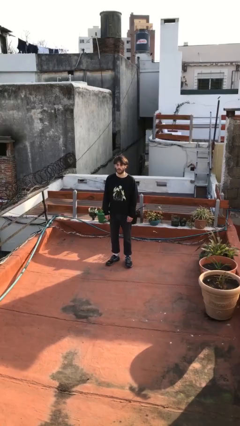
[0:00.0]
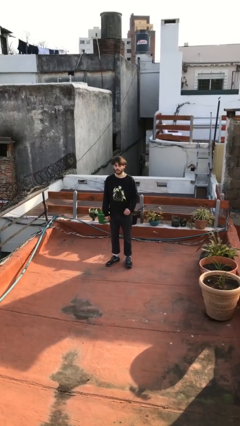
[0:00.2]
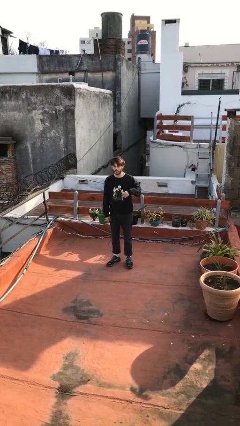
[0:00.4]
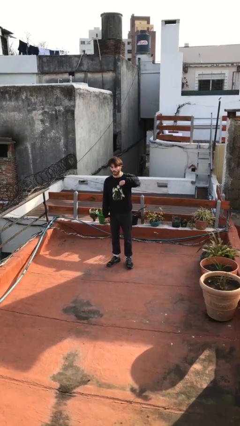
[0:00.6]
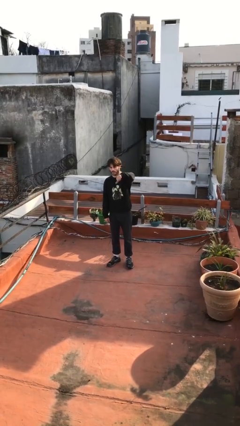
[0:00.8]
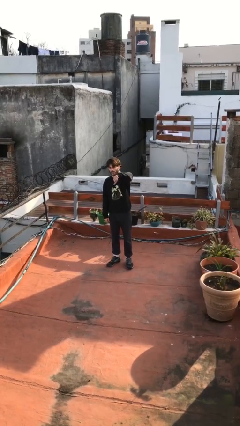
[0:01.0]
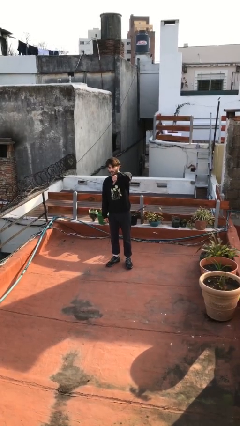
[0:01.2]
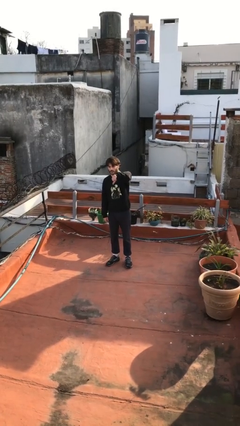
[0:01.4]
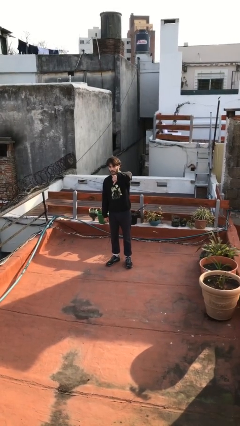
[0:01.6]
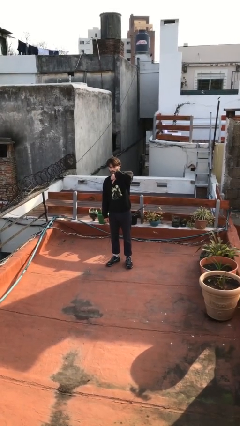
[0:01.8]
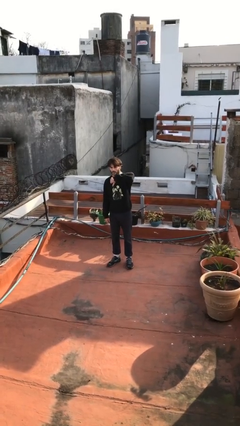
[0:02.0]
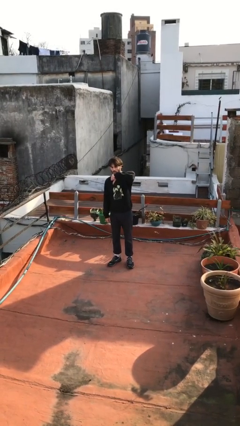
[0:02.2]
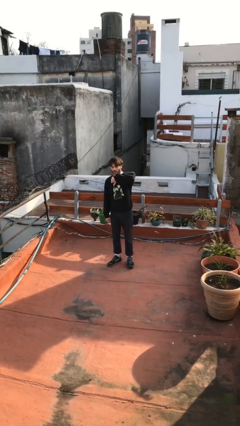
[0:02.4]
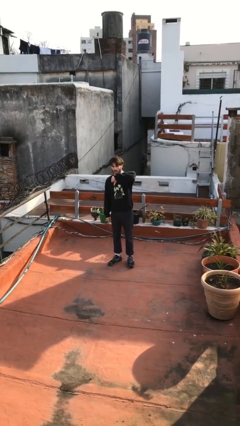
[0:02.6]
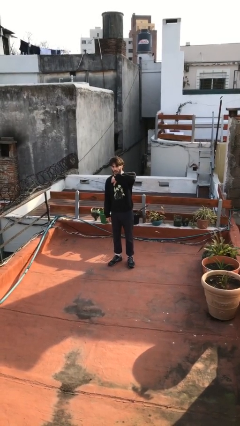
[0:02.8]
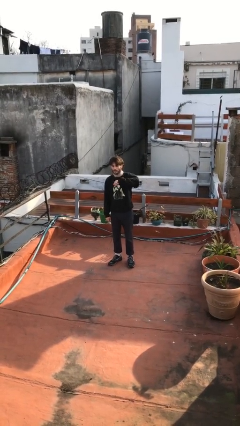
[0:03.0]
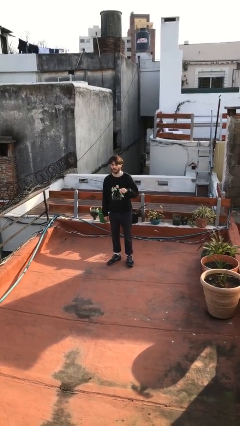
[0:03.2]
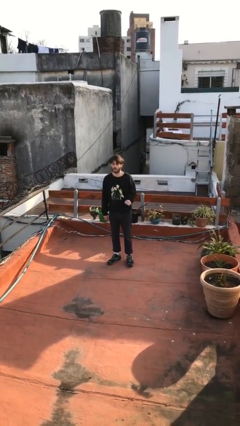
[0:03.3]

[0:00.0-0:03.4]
person gestures thumbs down

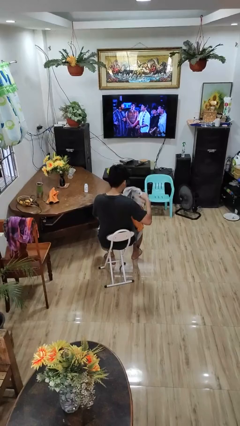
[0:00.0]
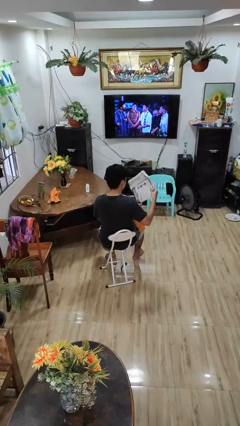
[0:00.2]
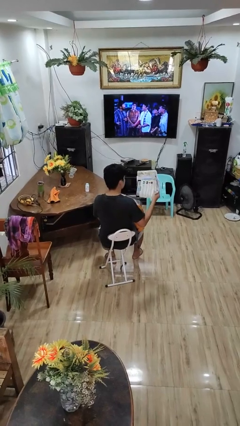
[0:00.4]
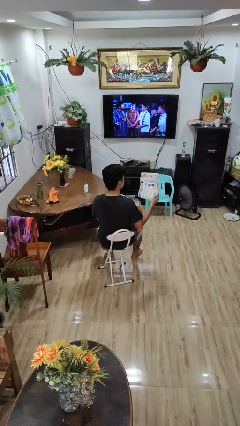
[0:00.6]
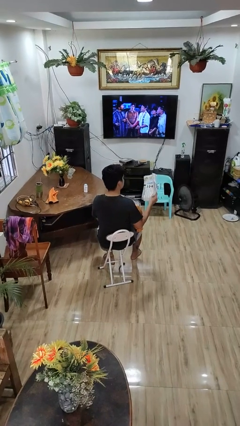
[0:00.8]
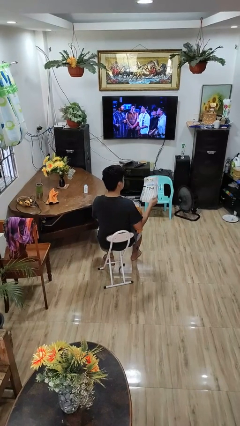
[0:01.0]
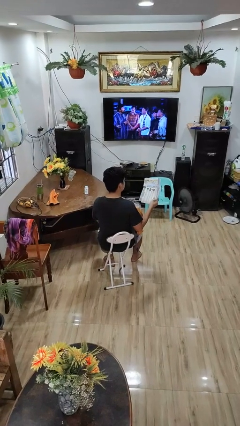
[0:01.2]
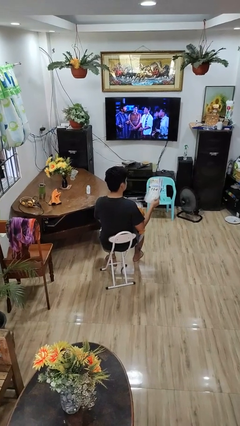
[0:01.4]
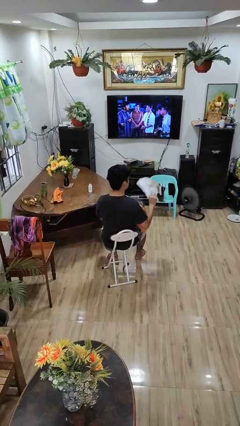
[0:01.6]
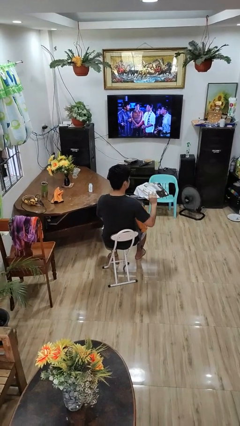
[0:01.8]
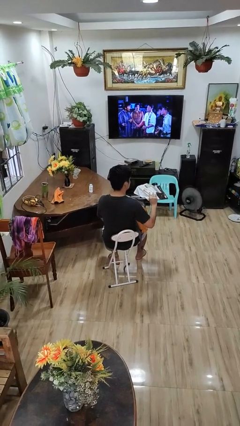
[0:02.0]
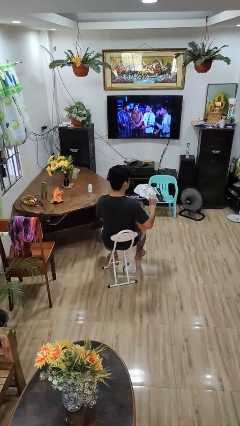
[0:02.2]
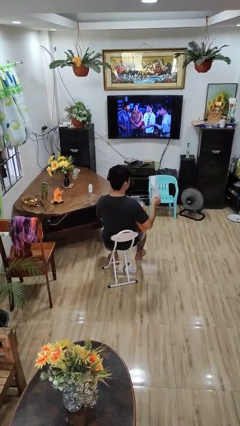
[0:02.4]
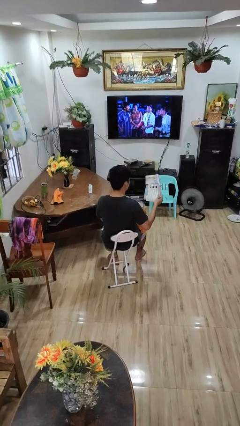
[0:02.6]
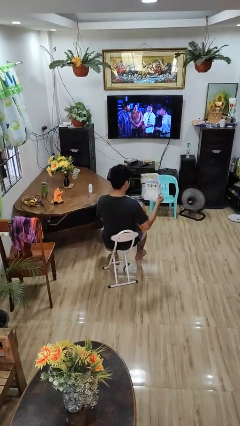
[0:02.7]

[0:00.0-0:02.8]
person takes object from backpack

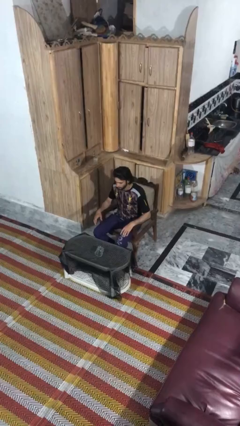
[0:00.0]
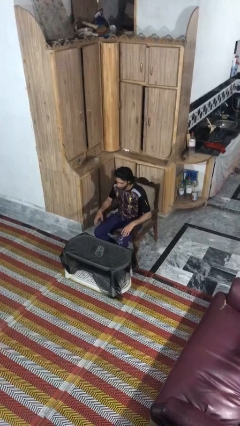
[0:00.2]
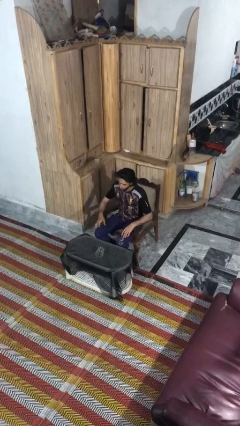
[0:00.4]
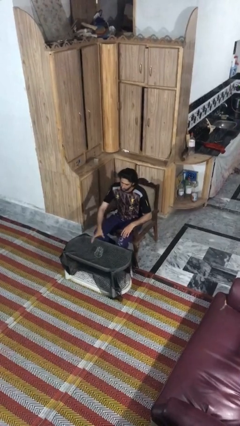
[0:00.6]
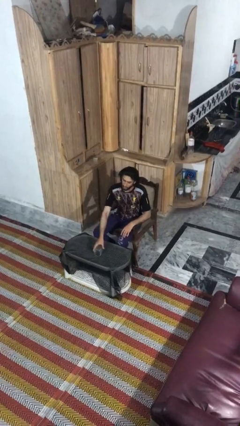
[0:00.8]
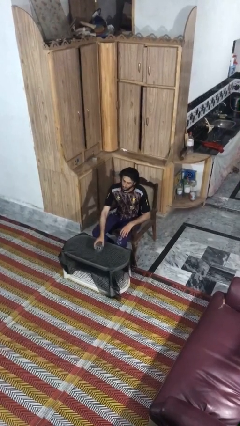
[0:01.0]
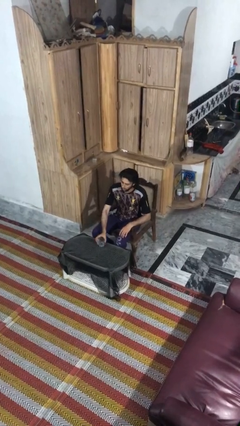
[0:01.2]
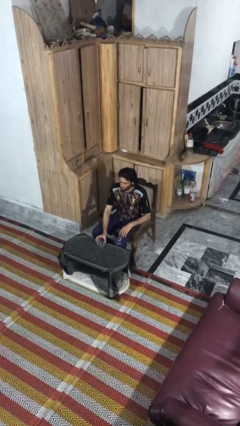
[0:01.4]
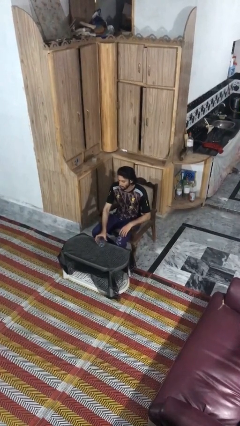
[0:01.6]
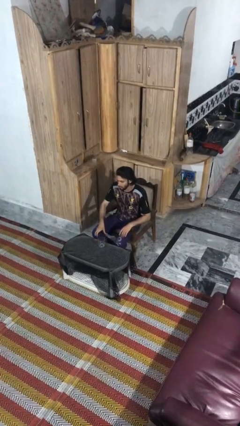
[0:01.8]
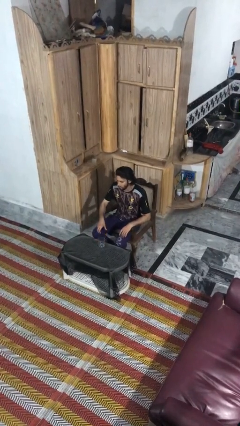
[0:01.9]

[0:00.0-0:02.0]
person sets upright glass

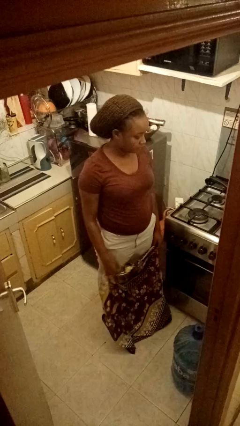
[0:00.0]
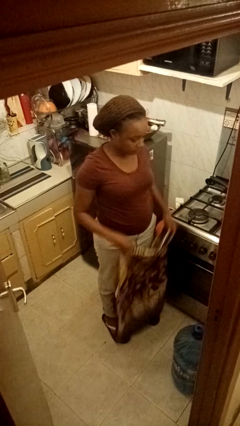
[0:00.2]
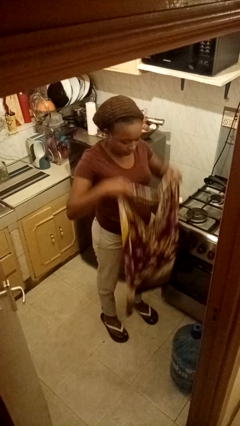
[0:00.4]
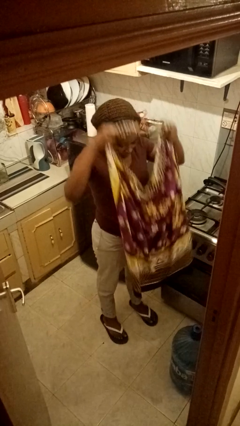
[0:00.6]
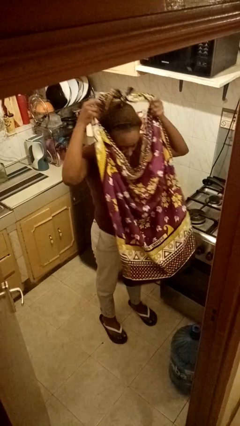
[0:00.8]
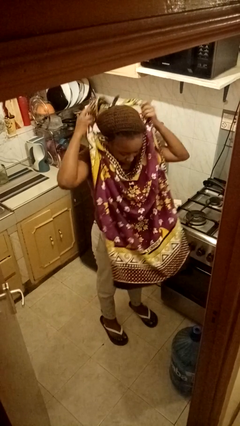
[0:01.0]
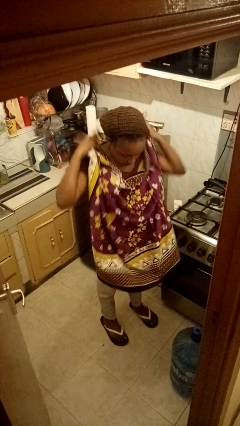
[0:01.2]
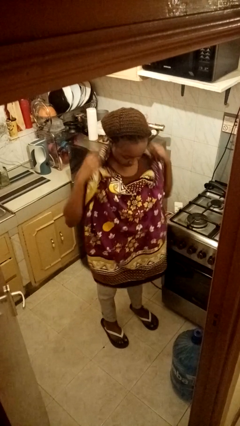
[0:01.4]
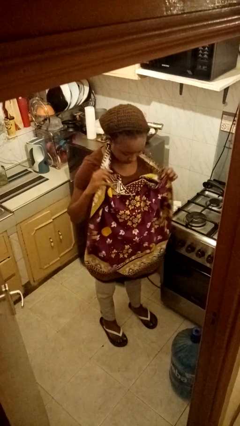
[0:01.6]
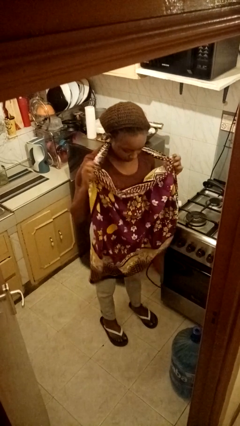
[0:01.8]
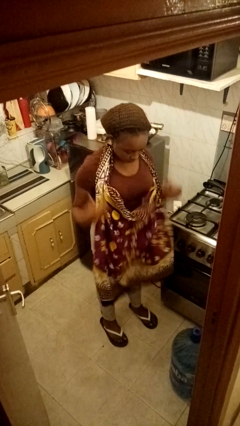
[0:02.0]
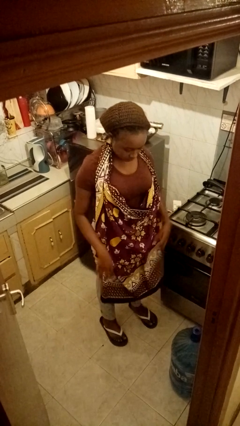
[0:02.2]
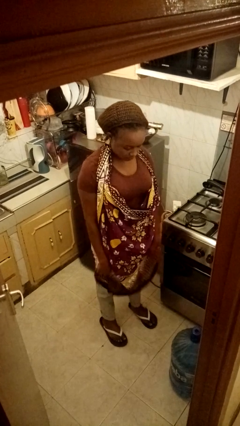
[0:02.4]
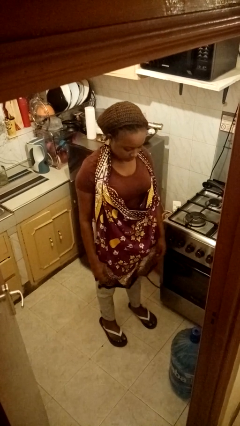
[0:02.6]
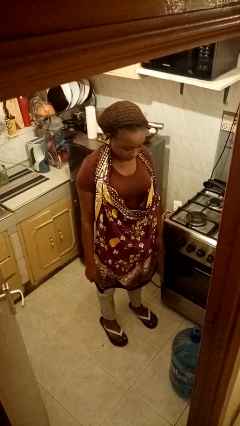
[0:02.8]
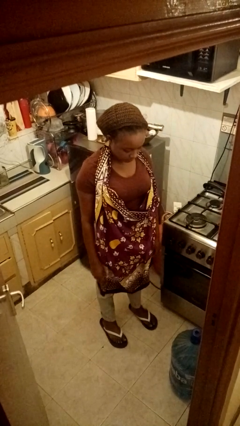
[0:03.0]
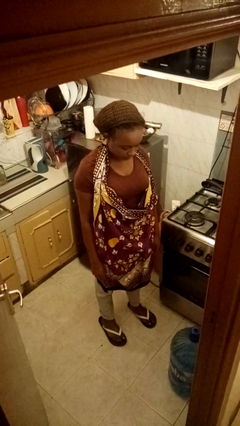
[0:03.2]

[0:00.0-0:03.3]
person puts on apron

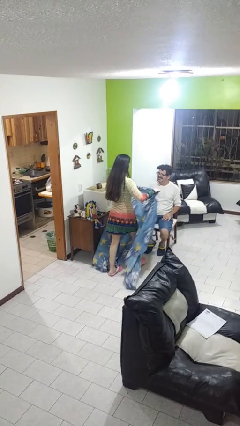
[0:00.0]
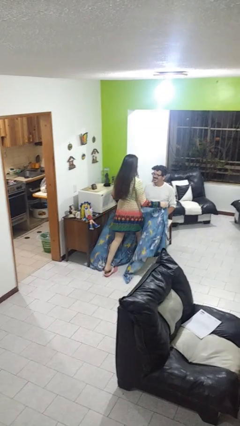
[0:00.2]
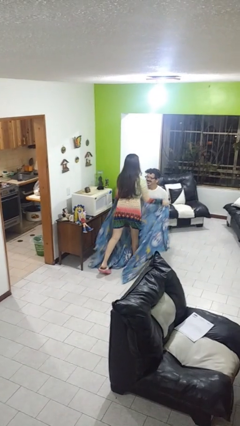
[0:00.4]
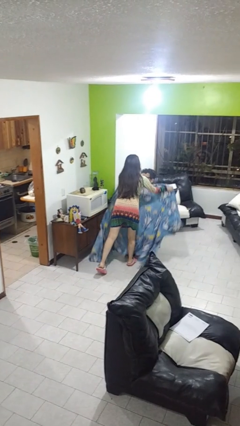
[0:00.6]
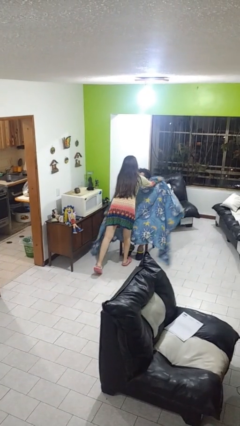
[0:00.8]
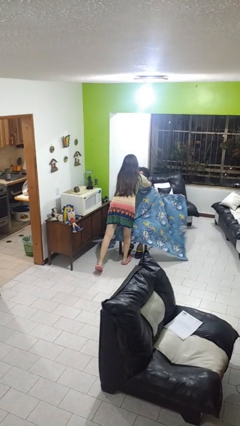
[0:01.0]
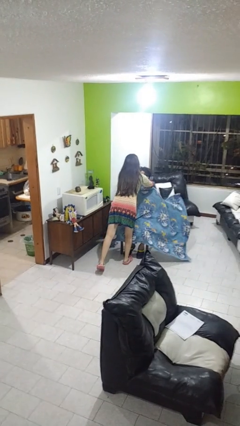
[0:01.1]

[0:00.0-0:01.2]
person covers friend with blanket

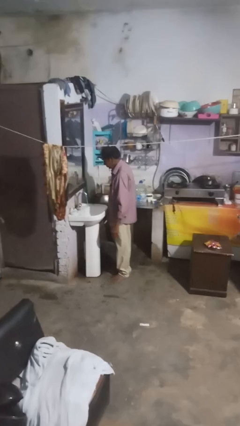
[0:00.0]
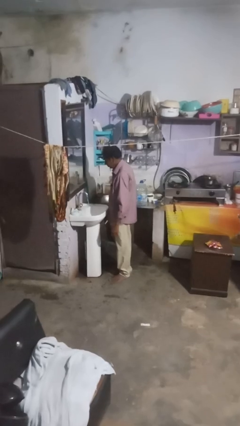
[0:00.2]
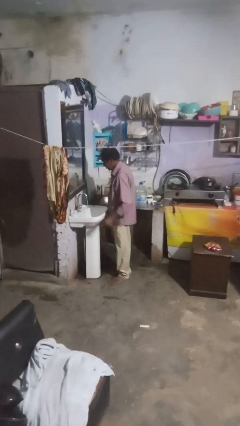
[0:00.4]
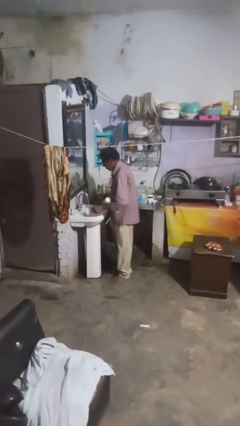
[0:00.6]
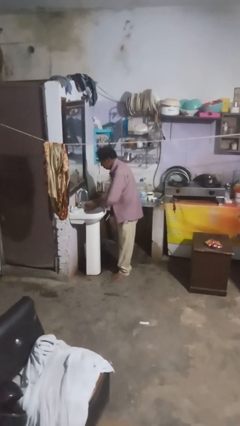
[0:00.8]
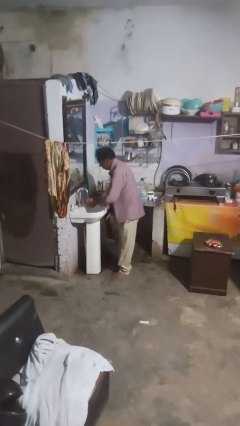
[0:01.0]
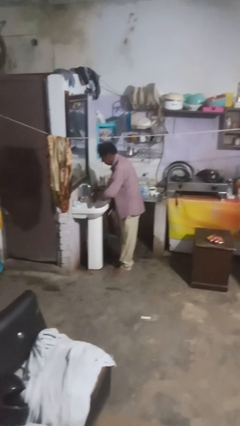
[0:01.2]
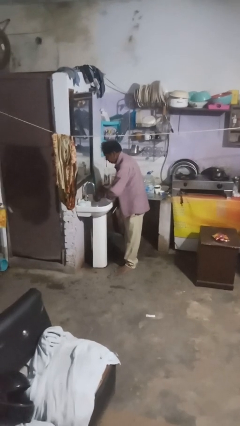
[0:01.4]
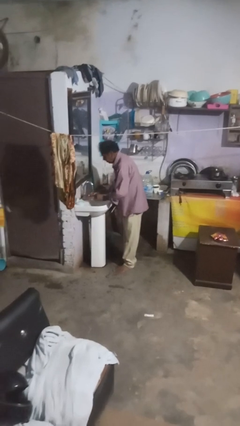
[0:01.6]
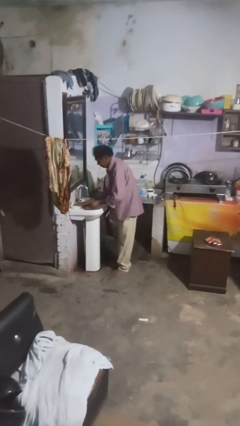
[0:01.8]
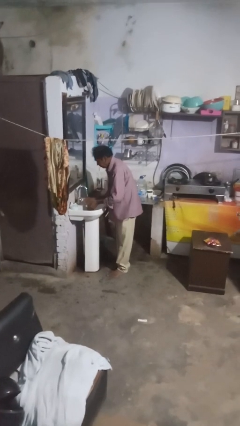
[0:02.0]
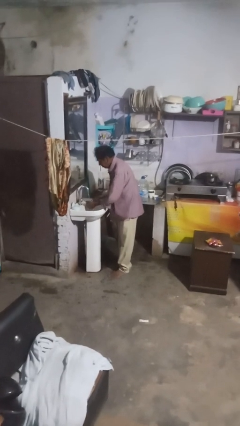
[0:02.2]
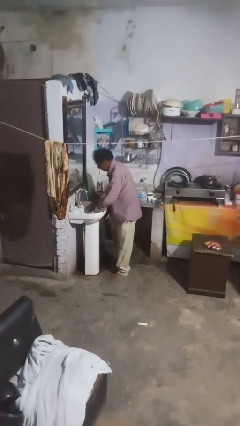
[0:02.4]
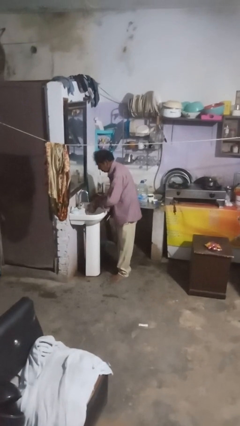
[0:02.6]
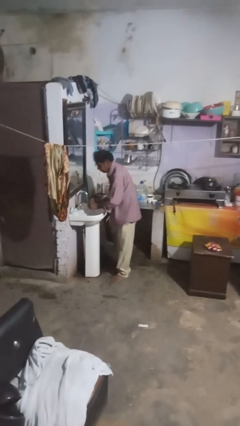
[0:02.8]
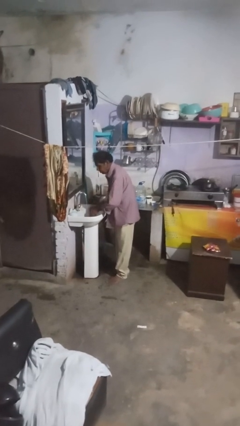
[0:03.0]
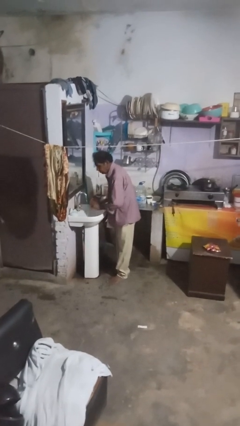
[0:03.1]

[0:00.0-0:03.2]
person washes hands

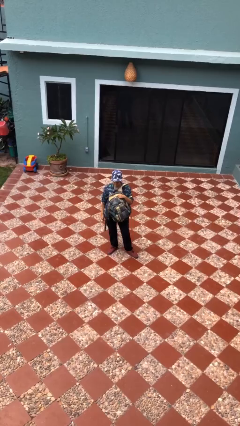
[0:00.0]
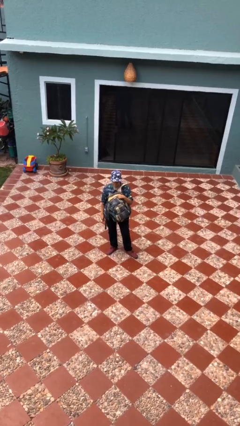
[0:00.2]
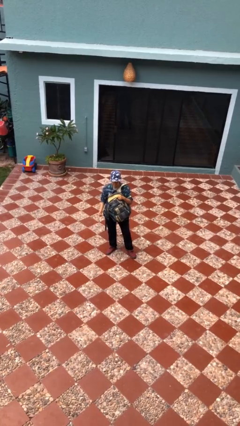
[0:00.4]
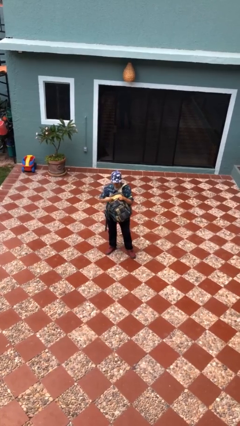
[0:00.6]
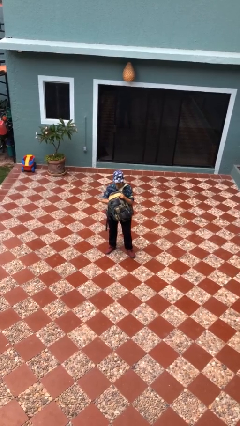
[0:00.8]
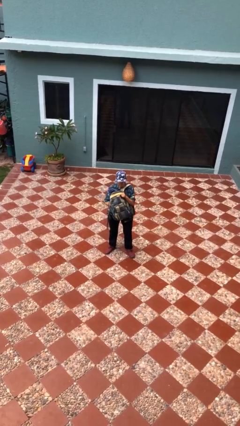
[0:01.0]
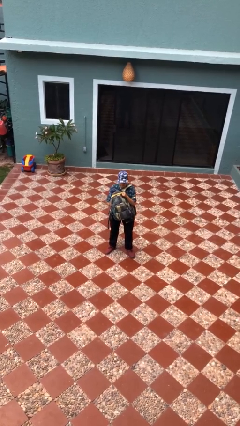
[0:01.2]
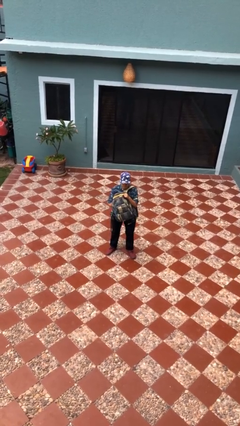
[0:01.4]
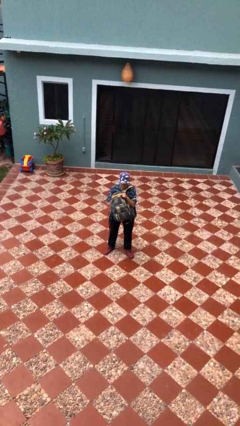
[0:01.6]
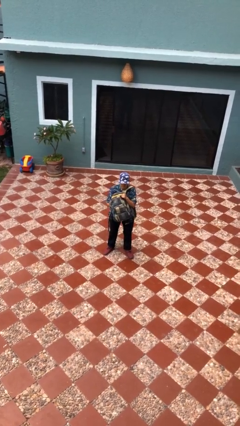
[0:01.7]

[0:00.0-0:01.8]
person searches in backpack
